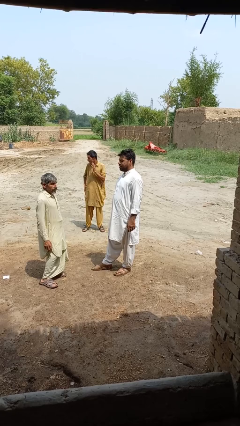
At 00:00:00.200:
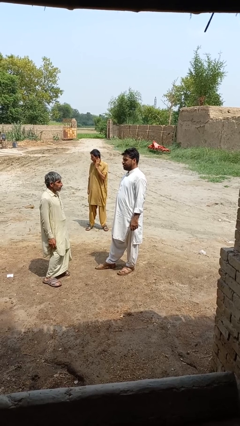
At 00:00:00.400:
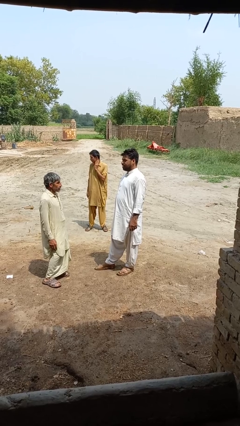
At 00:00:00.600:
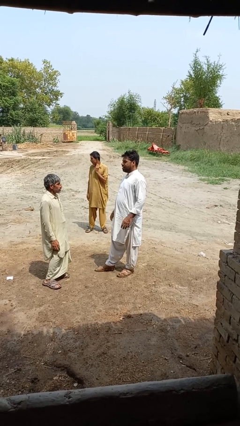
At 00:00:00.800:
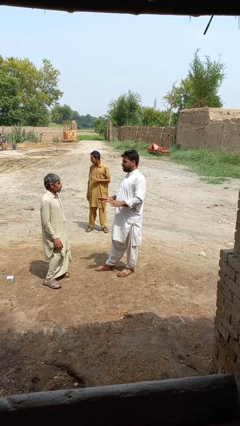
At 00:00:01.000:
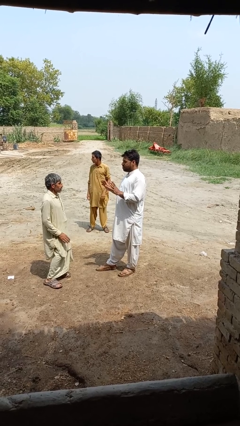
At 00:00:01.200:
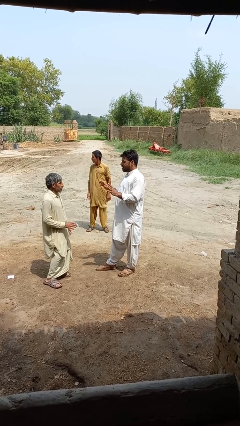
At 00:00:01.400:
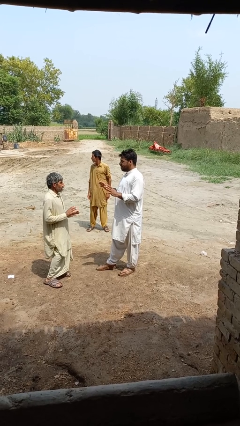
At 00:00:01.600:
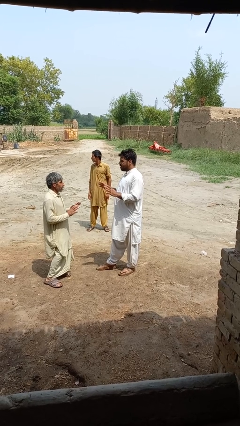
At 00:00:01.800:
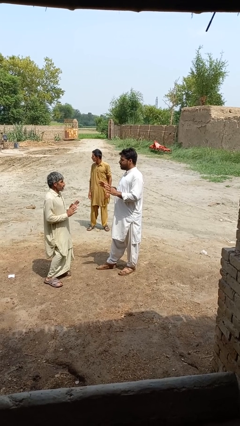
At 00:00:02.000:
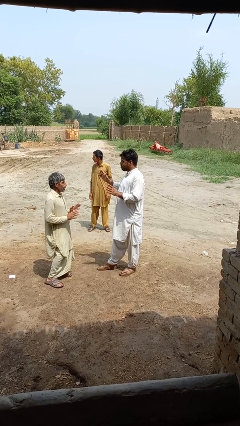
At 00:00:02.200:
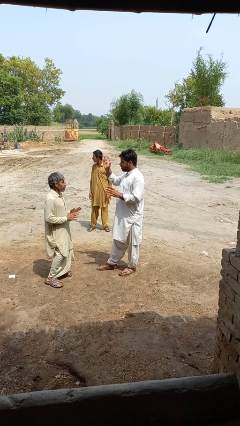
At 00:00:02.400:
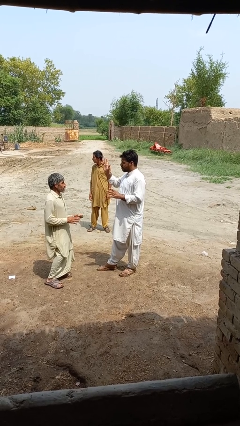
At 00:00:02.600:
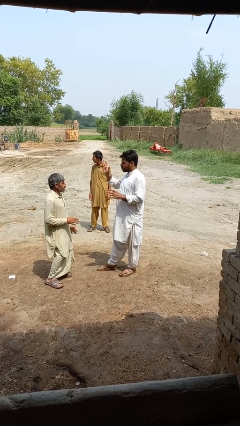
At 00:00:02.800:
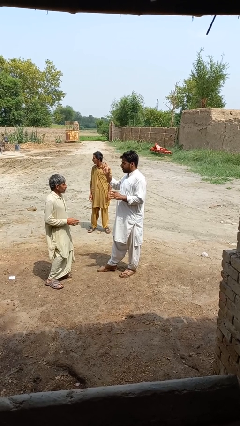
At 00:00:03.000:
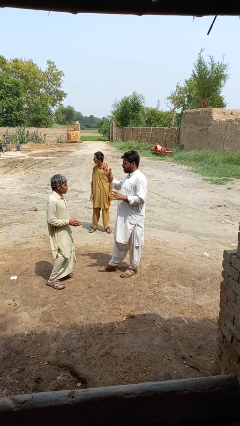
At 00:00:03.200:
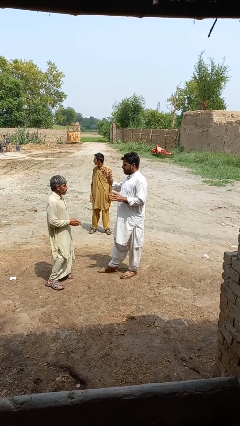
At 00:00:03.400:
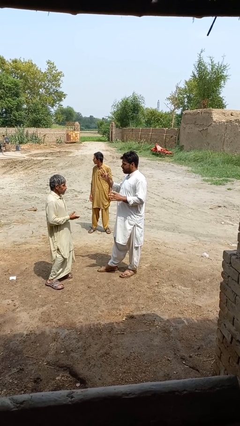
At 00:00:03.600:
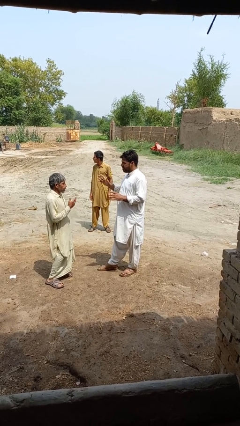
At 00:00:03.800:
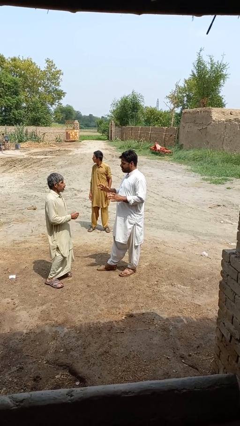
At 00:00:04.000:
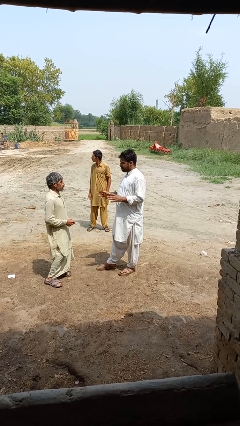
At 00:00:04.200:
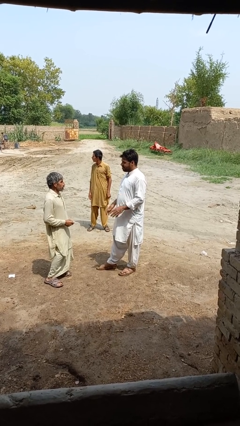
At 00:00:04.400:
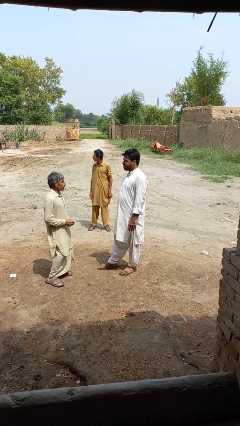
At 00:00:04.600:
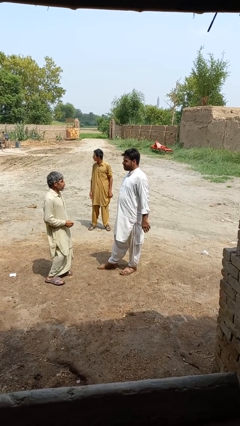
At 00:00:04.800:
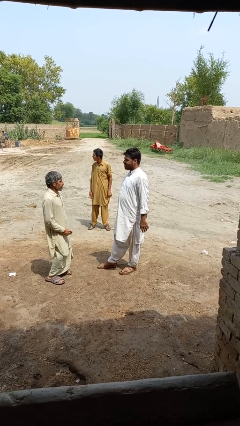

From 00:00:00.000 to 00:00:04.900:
person talks to person

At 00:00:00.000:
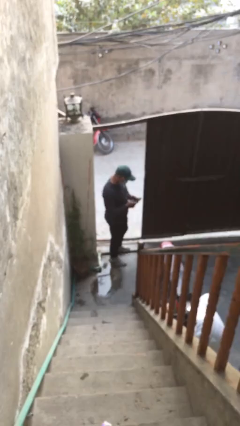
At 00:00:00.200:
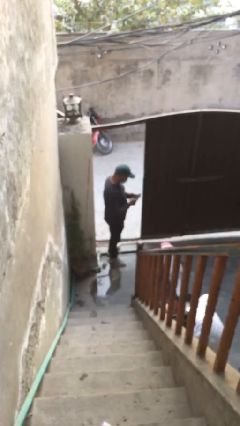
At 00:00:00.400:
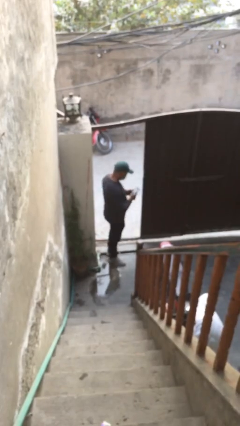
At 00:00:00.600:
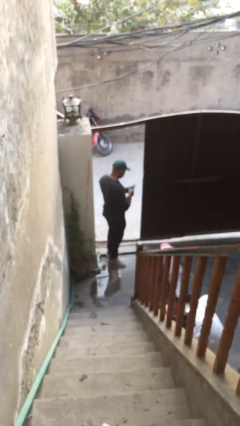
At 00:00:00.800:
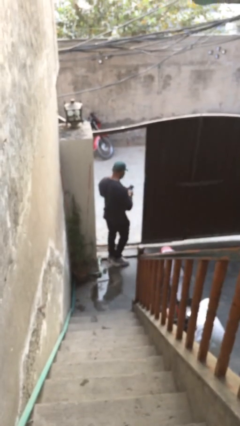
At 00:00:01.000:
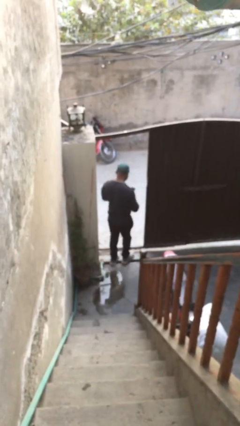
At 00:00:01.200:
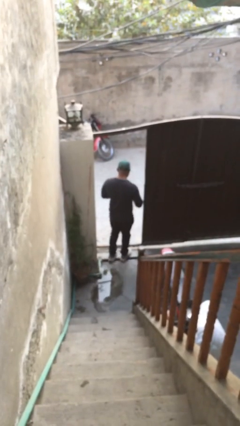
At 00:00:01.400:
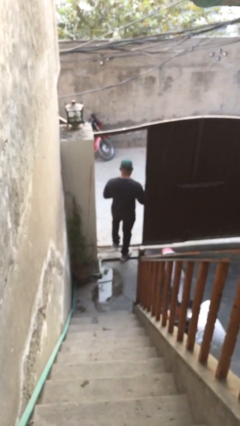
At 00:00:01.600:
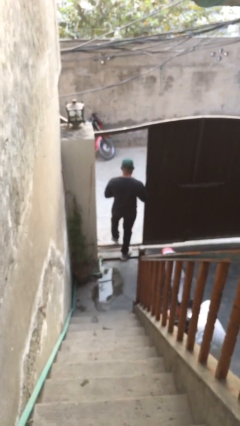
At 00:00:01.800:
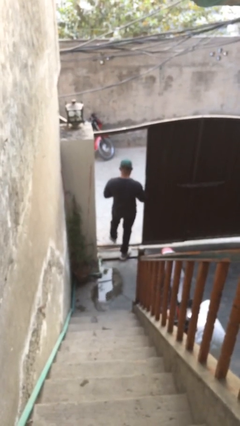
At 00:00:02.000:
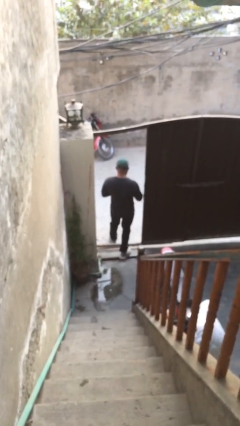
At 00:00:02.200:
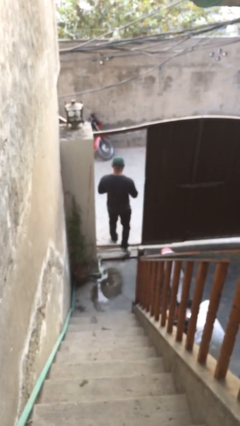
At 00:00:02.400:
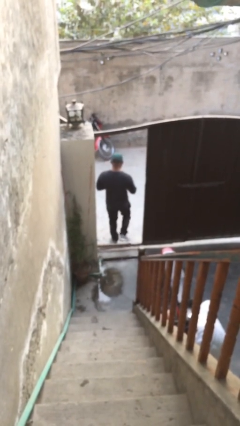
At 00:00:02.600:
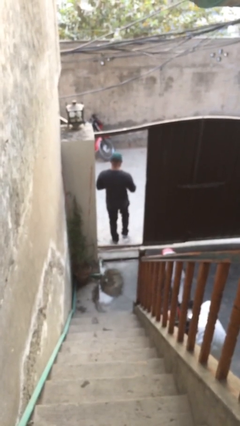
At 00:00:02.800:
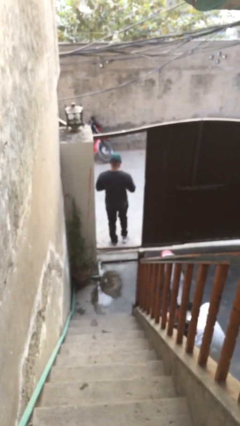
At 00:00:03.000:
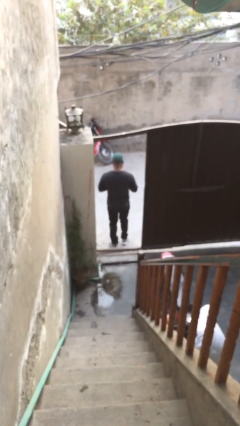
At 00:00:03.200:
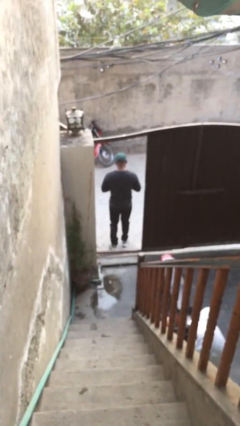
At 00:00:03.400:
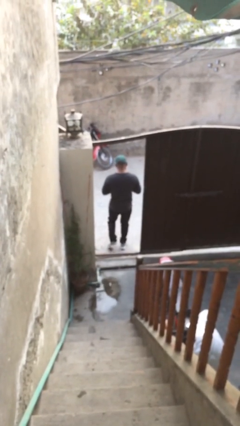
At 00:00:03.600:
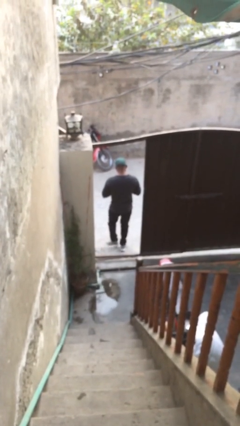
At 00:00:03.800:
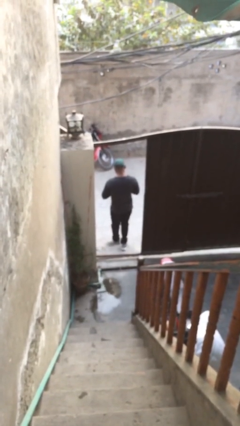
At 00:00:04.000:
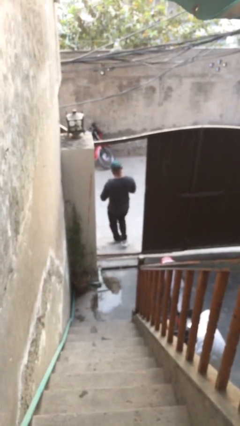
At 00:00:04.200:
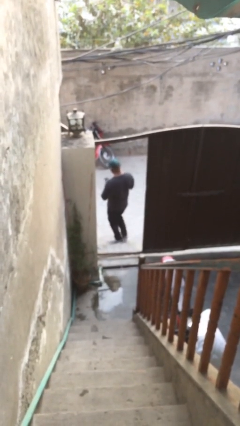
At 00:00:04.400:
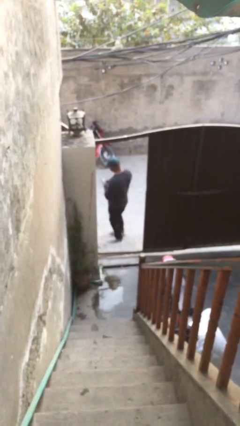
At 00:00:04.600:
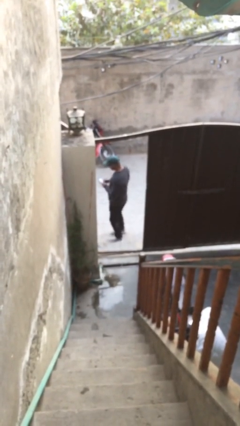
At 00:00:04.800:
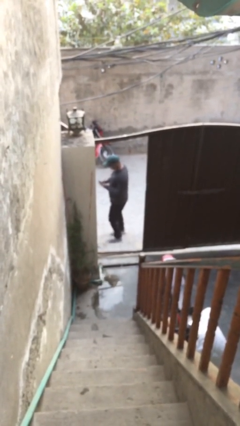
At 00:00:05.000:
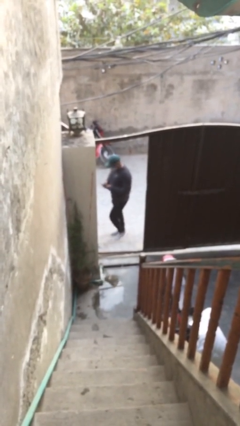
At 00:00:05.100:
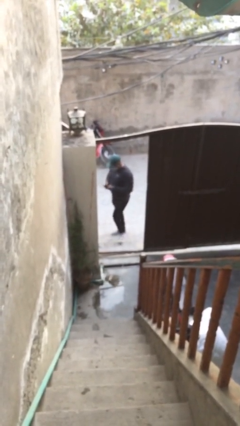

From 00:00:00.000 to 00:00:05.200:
person exits scene through structure

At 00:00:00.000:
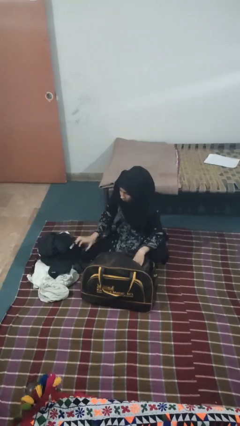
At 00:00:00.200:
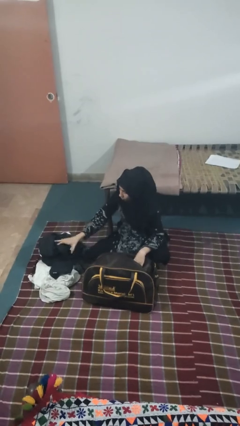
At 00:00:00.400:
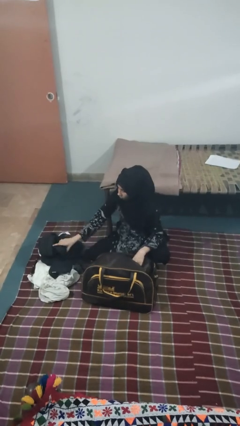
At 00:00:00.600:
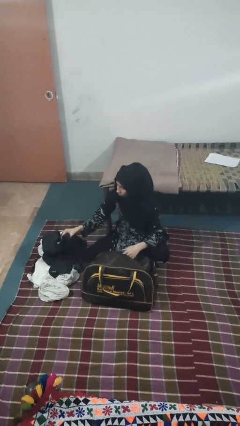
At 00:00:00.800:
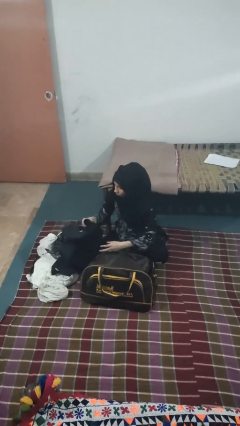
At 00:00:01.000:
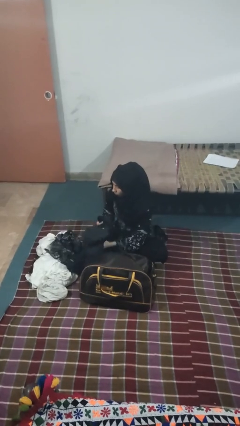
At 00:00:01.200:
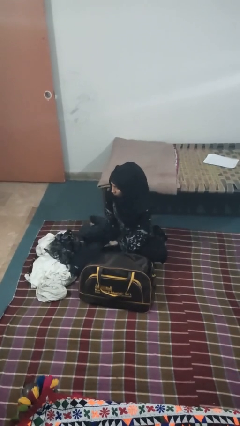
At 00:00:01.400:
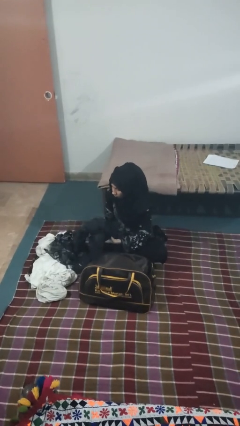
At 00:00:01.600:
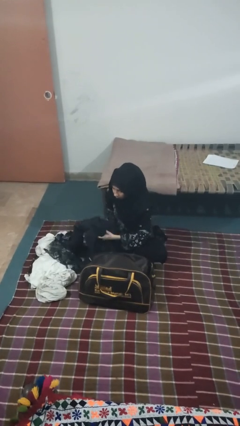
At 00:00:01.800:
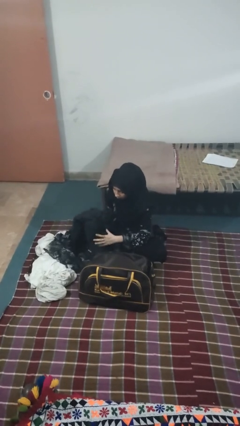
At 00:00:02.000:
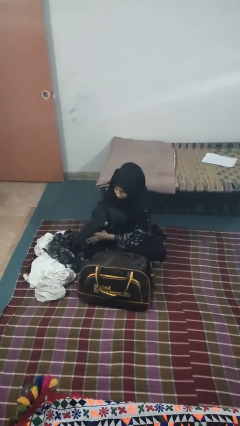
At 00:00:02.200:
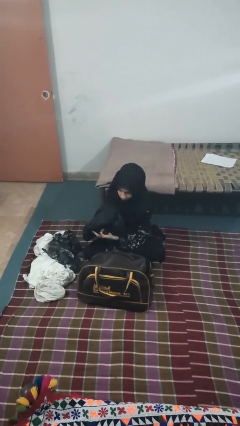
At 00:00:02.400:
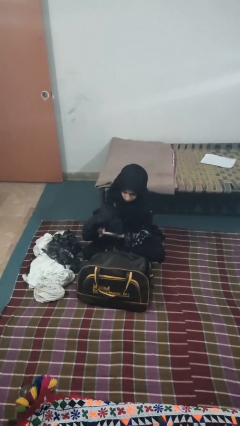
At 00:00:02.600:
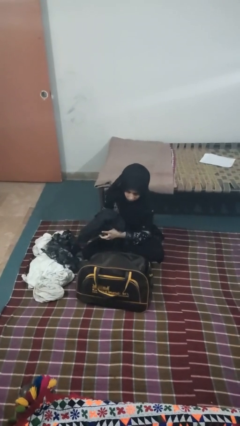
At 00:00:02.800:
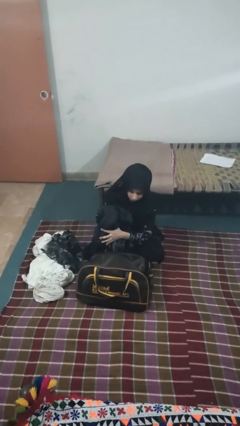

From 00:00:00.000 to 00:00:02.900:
person loads clothes into suitcase

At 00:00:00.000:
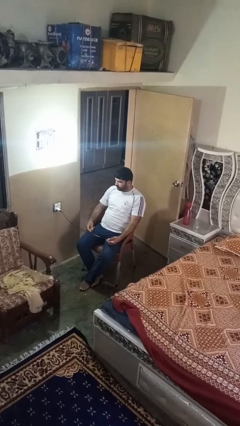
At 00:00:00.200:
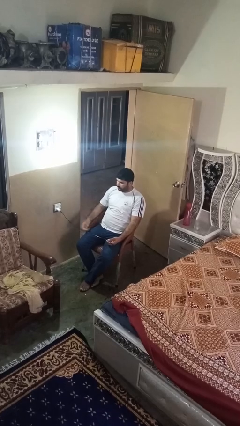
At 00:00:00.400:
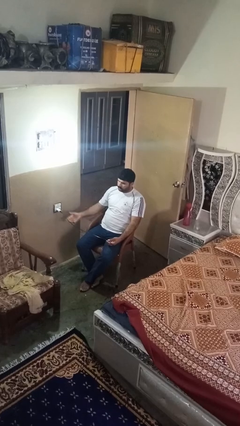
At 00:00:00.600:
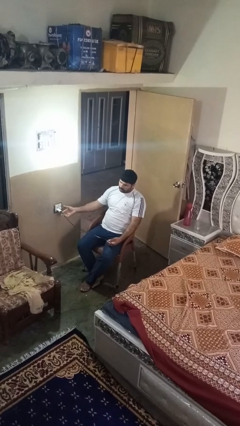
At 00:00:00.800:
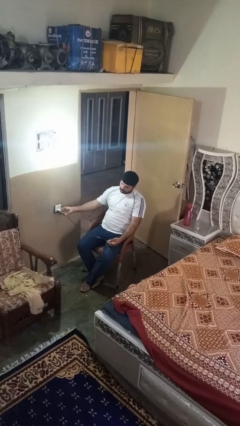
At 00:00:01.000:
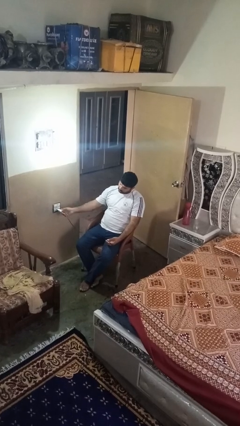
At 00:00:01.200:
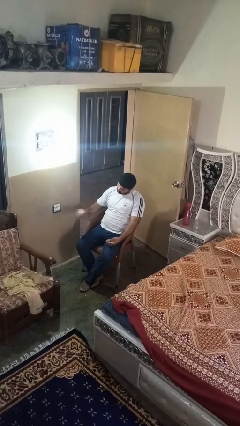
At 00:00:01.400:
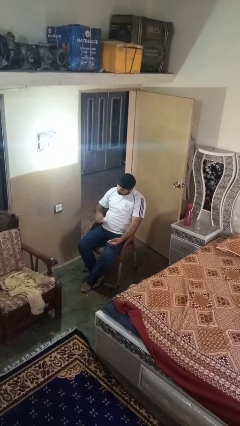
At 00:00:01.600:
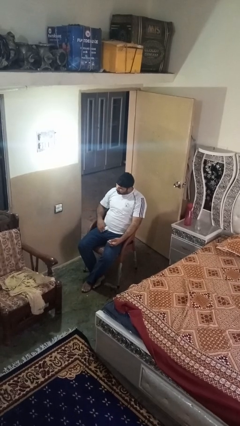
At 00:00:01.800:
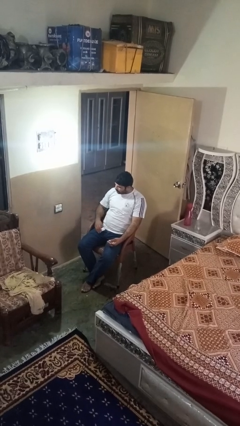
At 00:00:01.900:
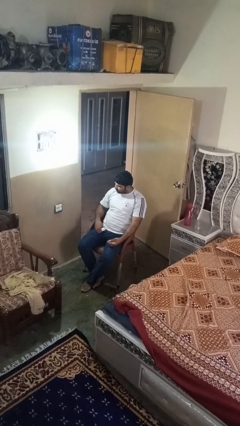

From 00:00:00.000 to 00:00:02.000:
person unplugs from electrical socket

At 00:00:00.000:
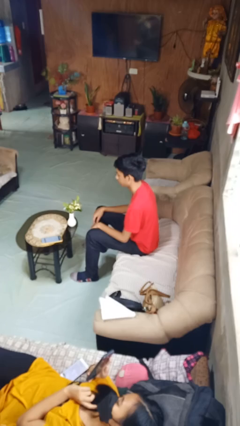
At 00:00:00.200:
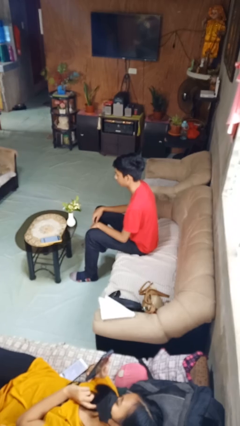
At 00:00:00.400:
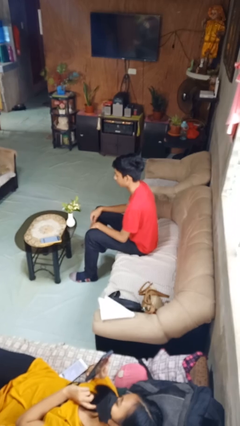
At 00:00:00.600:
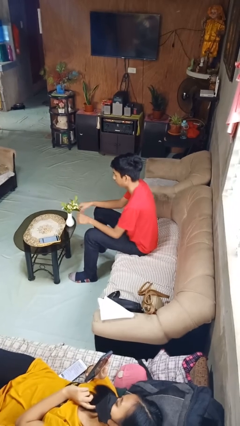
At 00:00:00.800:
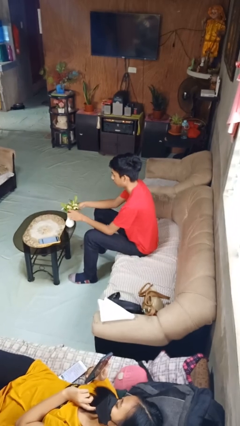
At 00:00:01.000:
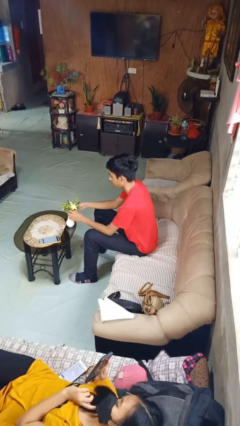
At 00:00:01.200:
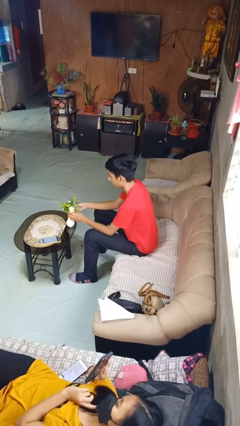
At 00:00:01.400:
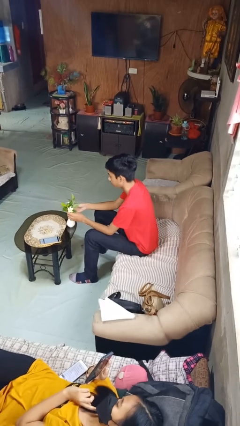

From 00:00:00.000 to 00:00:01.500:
person arranges flowers in vase

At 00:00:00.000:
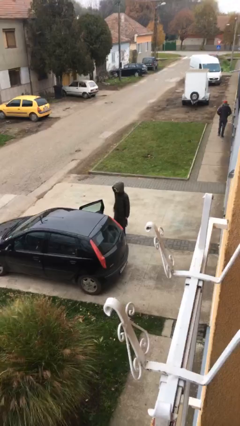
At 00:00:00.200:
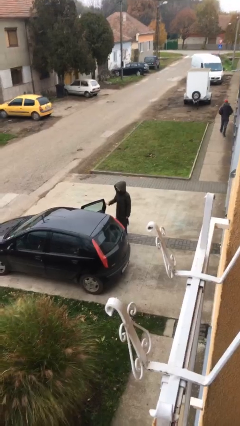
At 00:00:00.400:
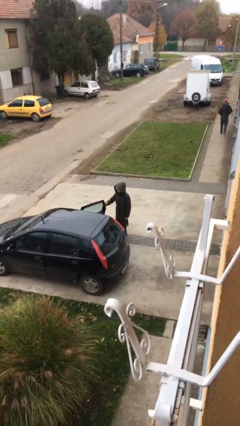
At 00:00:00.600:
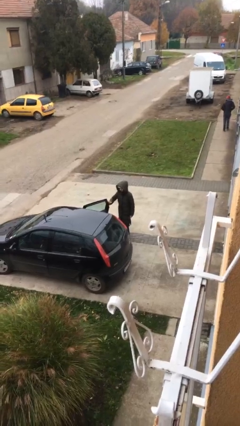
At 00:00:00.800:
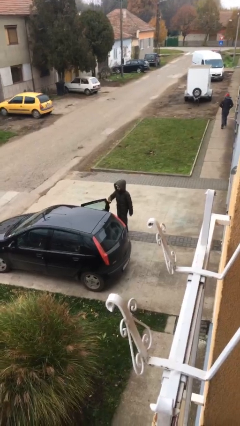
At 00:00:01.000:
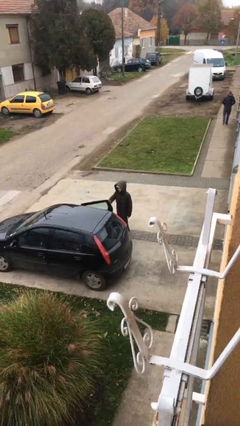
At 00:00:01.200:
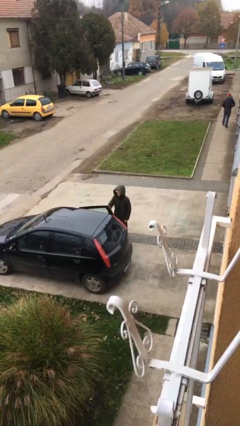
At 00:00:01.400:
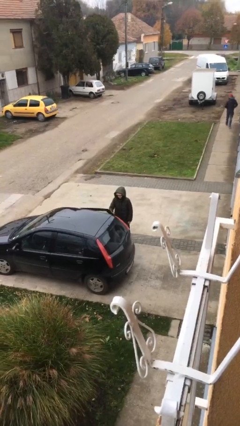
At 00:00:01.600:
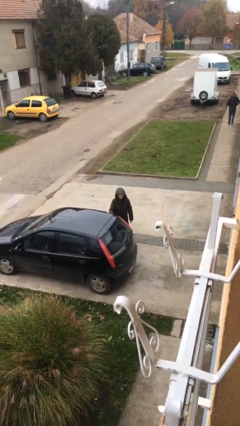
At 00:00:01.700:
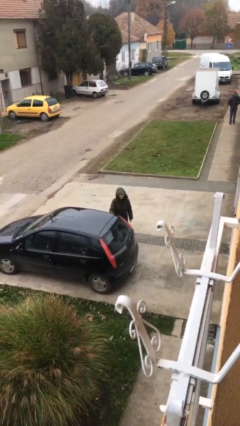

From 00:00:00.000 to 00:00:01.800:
person closes car door
